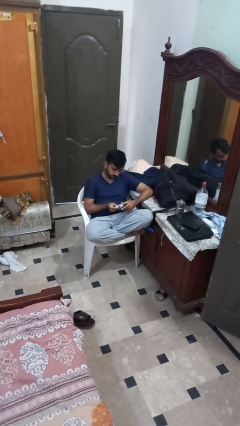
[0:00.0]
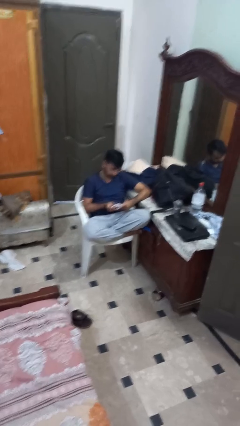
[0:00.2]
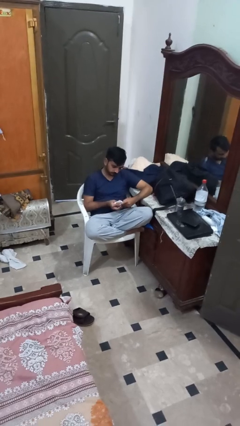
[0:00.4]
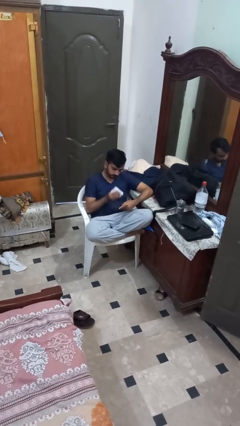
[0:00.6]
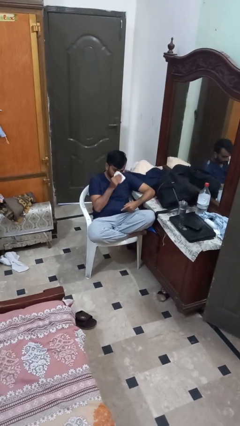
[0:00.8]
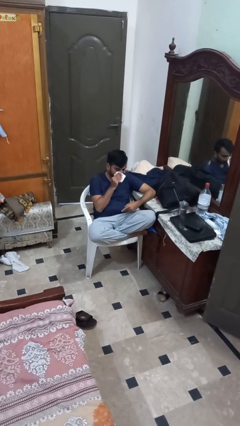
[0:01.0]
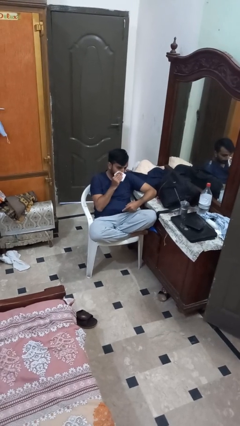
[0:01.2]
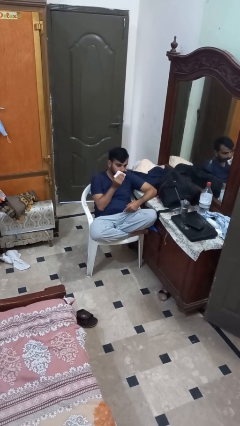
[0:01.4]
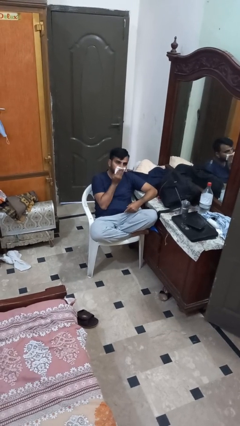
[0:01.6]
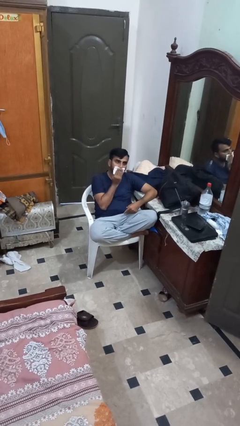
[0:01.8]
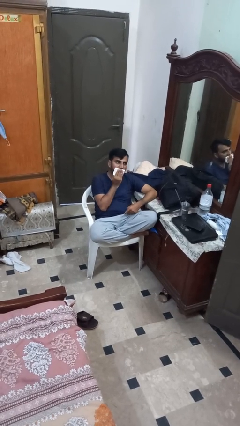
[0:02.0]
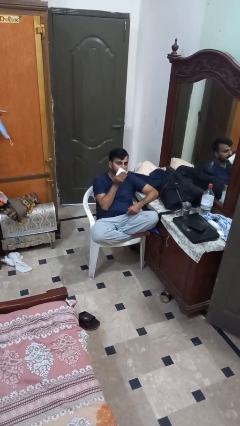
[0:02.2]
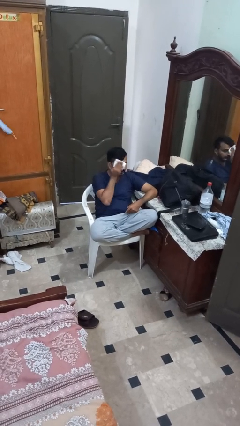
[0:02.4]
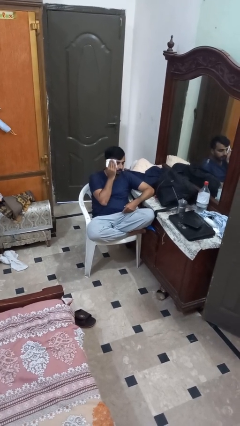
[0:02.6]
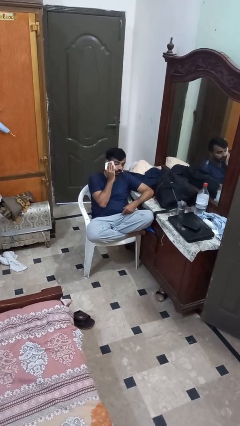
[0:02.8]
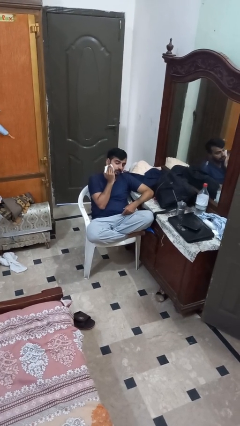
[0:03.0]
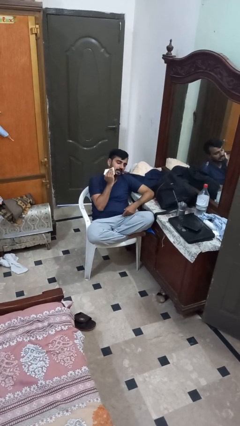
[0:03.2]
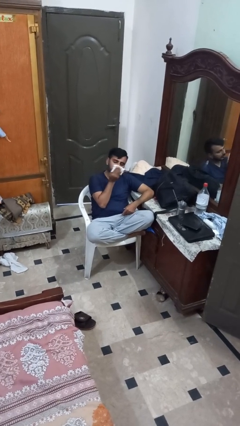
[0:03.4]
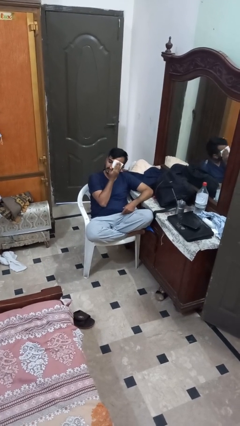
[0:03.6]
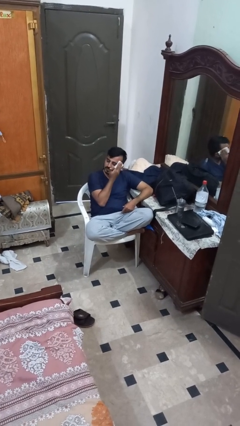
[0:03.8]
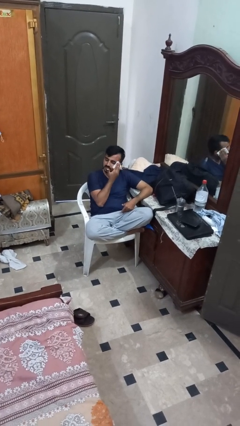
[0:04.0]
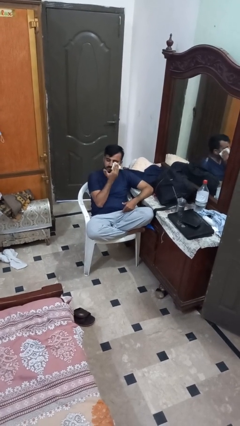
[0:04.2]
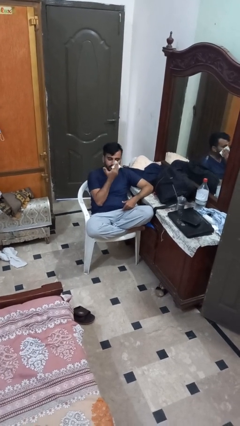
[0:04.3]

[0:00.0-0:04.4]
person wipes mouth with napkin

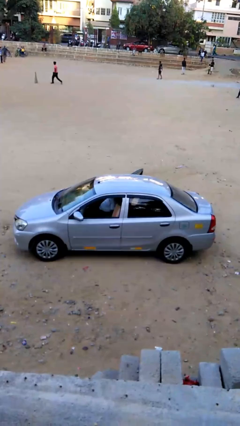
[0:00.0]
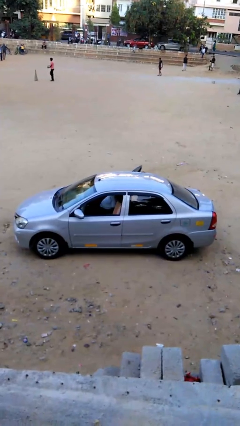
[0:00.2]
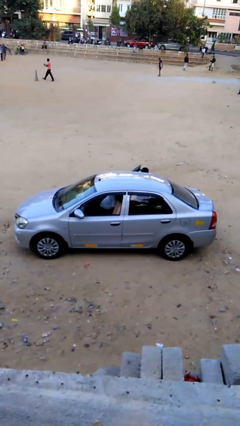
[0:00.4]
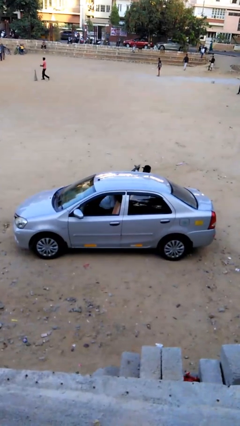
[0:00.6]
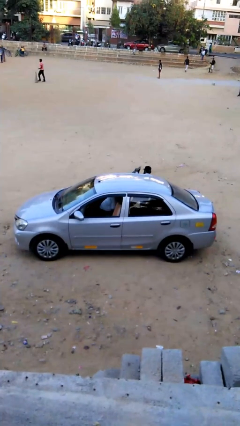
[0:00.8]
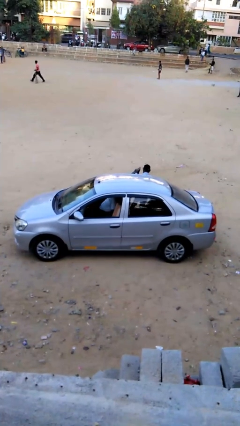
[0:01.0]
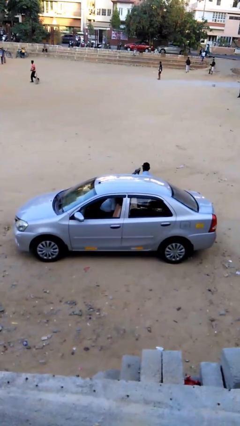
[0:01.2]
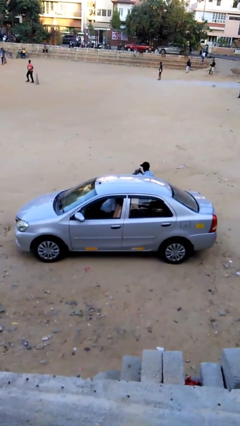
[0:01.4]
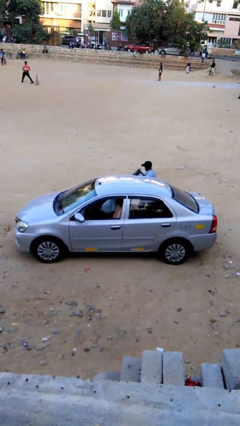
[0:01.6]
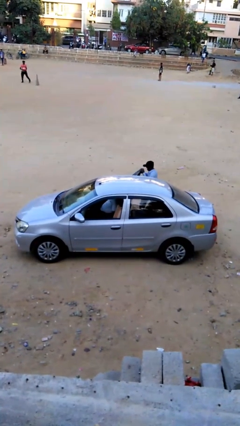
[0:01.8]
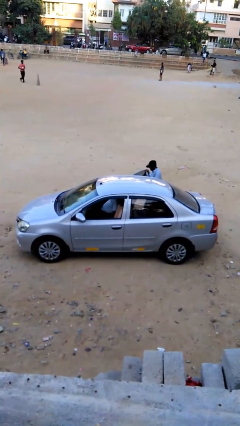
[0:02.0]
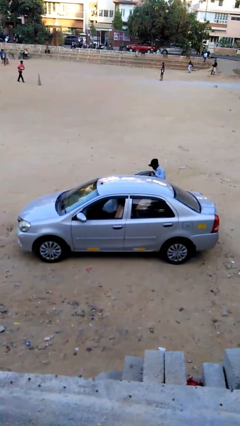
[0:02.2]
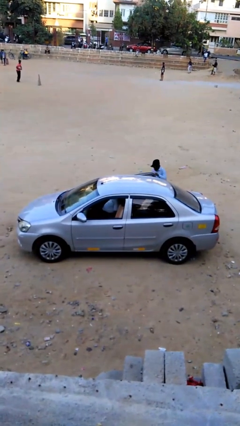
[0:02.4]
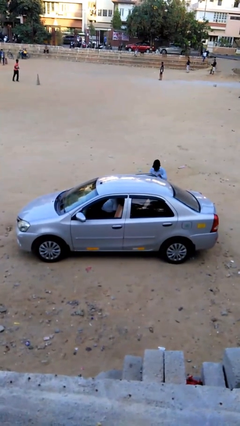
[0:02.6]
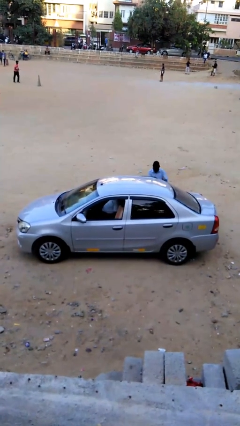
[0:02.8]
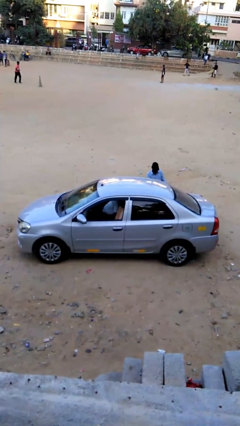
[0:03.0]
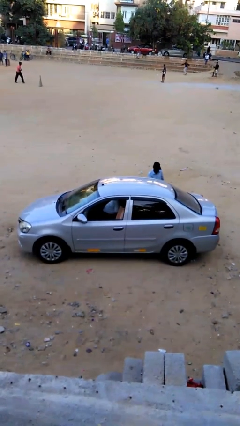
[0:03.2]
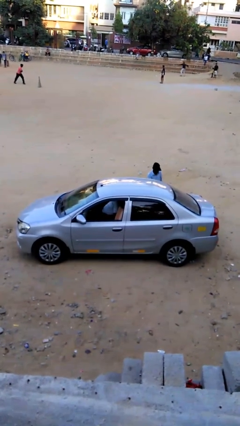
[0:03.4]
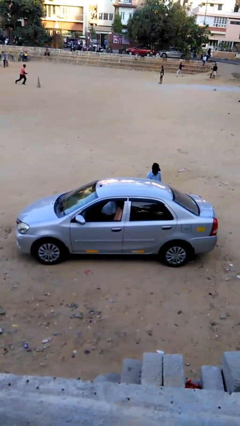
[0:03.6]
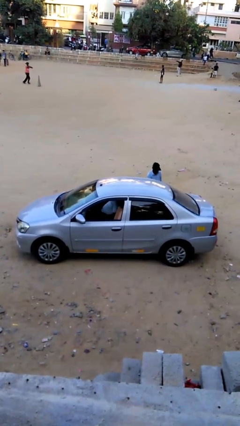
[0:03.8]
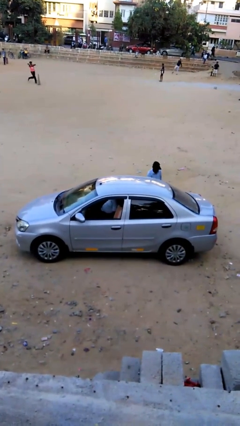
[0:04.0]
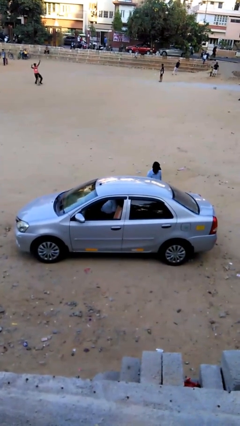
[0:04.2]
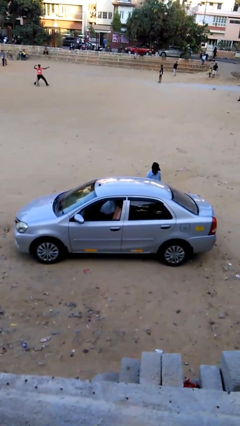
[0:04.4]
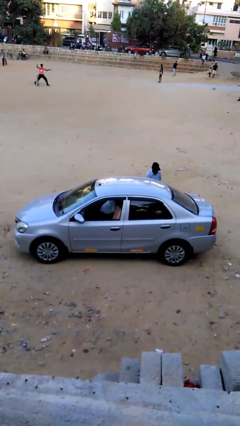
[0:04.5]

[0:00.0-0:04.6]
car drops off person

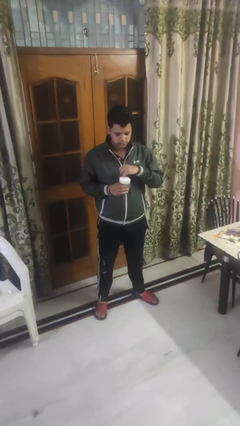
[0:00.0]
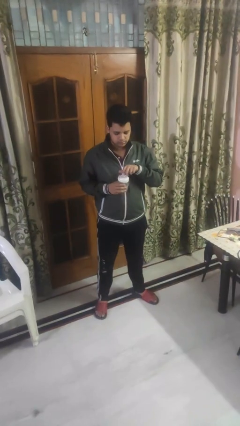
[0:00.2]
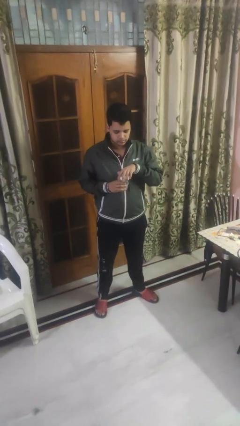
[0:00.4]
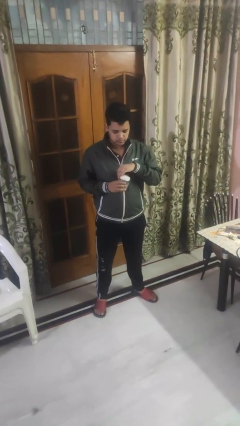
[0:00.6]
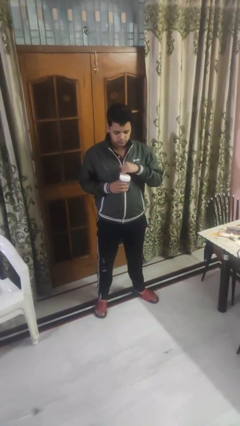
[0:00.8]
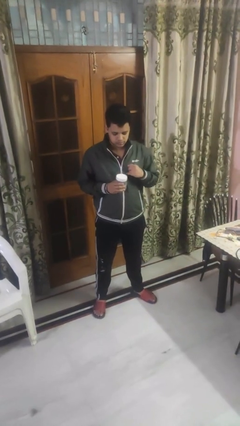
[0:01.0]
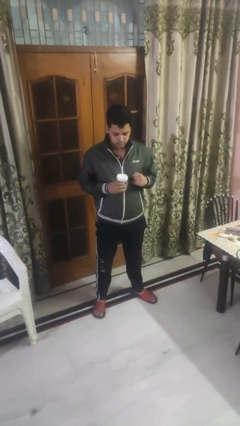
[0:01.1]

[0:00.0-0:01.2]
person closes jar

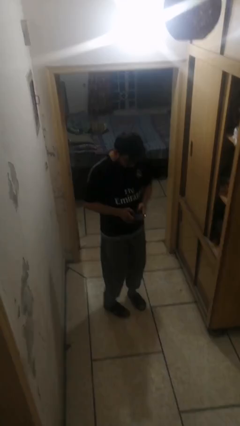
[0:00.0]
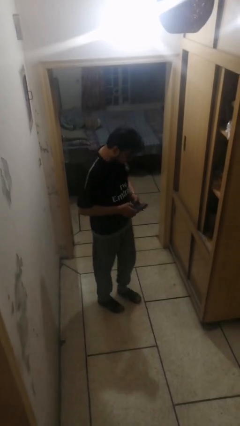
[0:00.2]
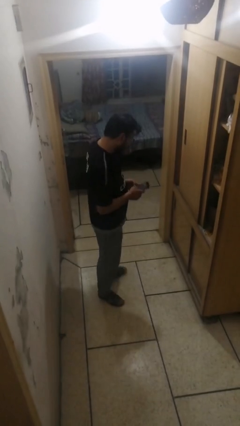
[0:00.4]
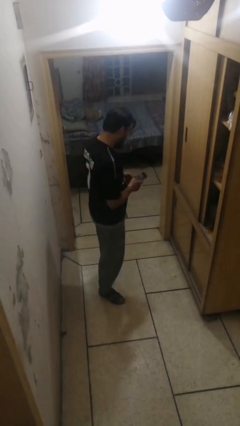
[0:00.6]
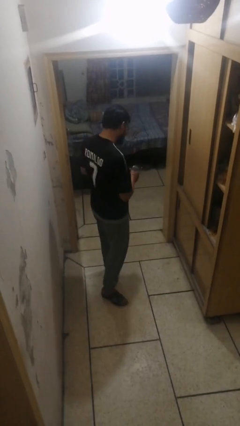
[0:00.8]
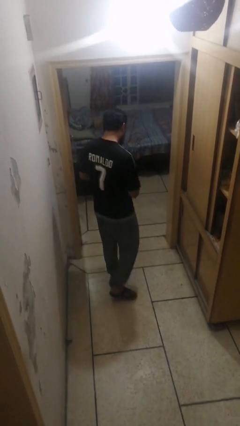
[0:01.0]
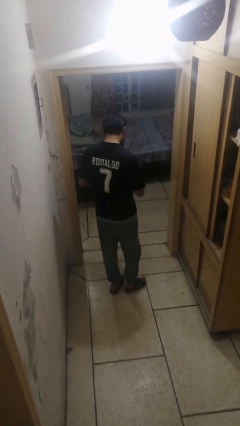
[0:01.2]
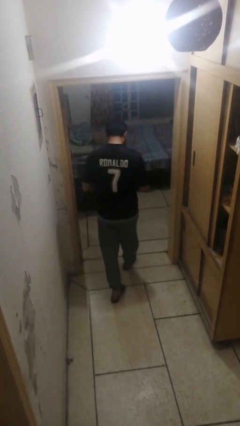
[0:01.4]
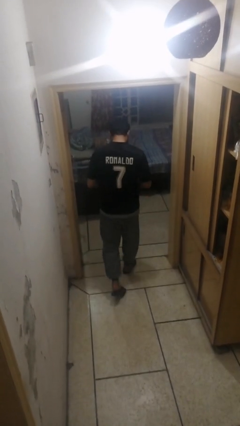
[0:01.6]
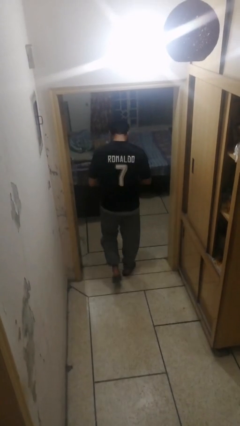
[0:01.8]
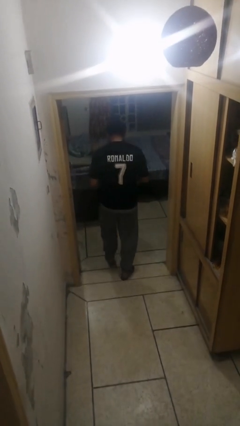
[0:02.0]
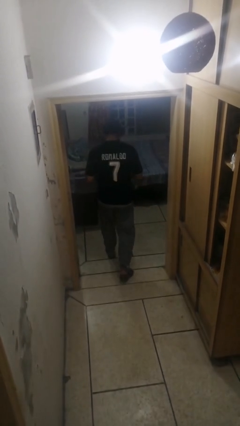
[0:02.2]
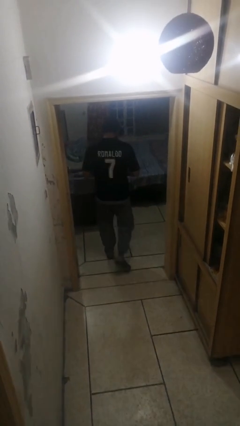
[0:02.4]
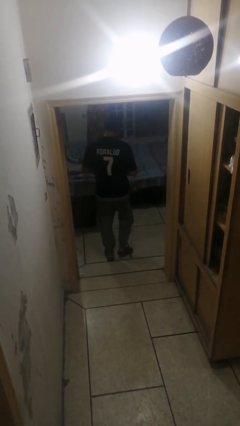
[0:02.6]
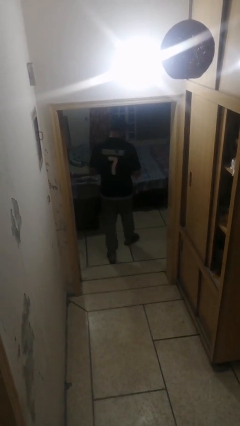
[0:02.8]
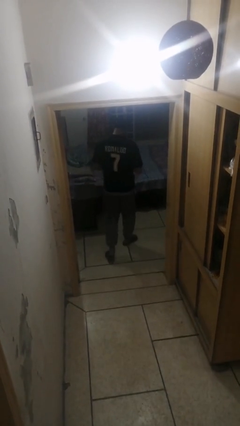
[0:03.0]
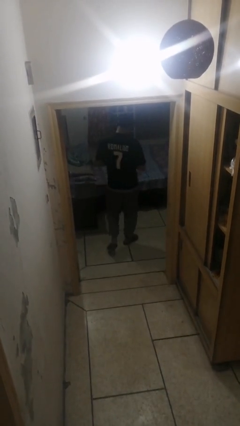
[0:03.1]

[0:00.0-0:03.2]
person exits scene through structure

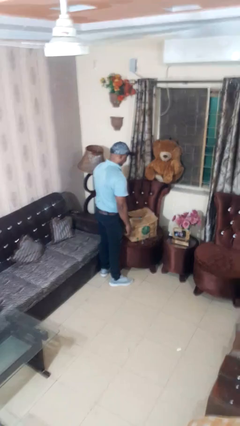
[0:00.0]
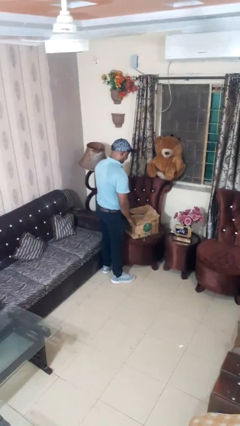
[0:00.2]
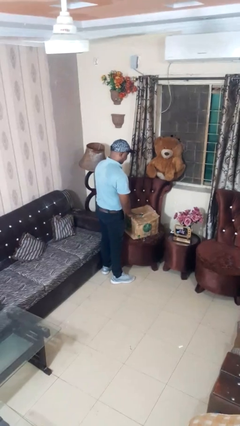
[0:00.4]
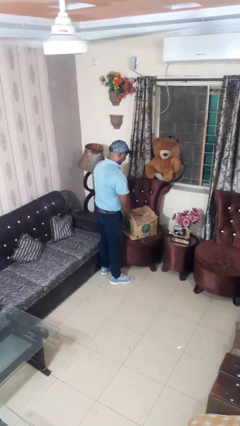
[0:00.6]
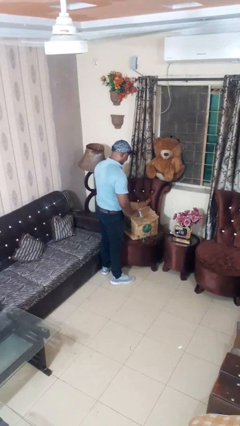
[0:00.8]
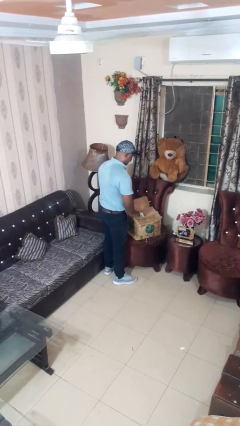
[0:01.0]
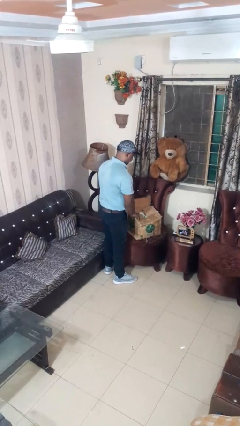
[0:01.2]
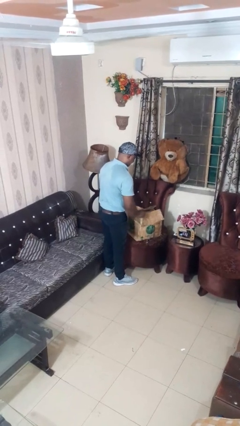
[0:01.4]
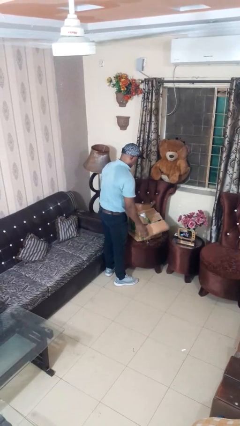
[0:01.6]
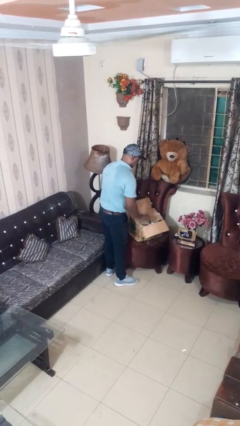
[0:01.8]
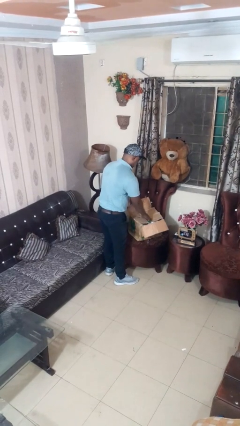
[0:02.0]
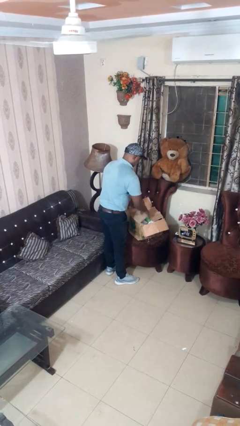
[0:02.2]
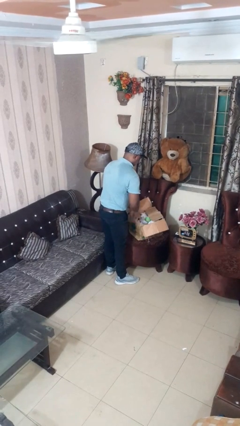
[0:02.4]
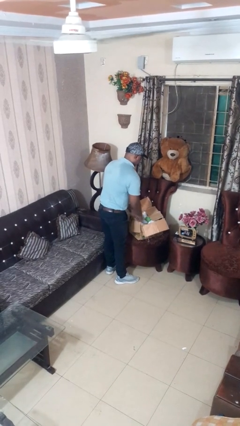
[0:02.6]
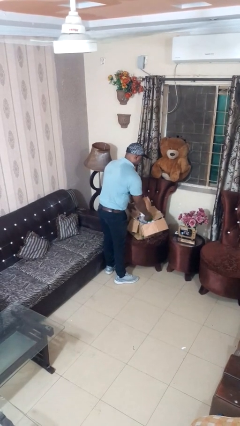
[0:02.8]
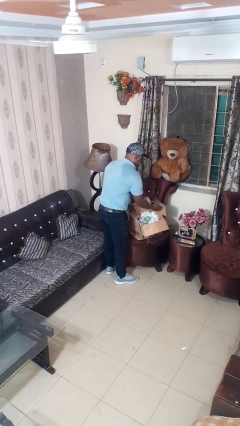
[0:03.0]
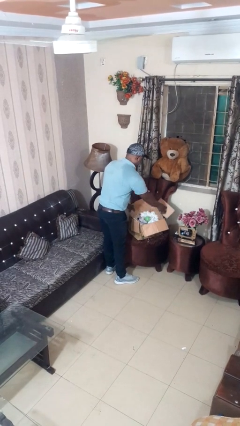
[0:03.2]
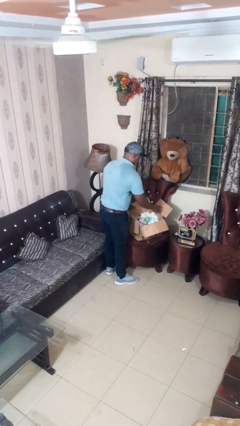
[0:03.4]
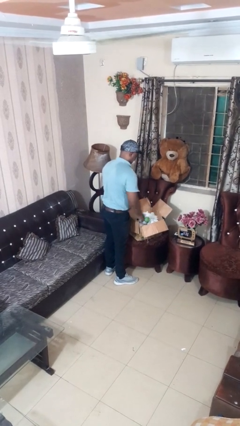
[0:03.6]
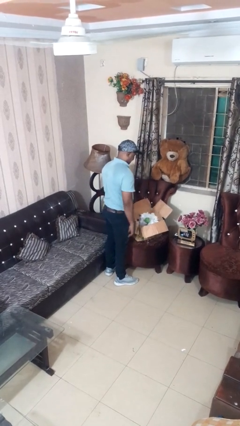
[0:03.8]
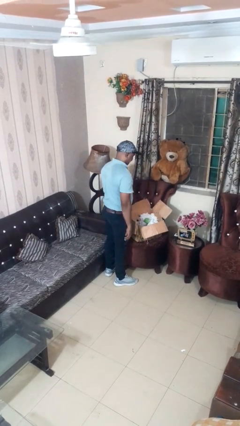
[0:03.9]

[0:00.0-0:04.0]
person opens box

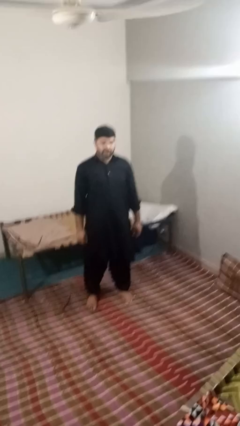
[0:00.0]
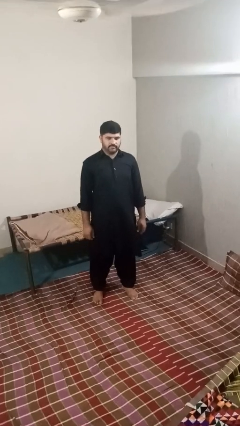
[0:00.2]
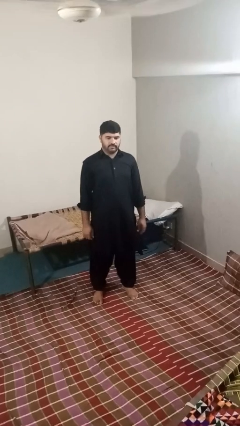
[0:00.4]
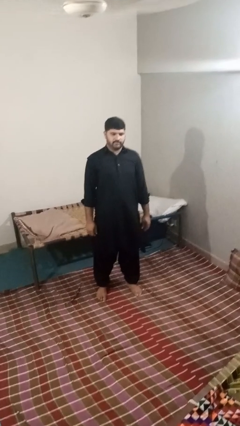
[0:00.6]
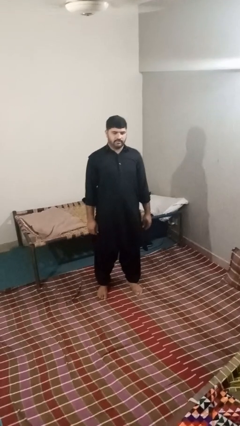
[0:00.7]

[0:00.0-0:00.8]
person stands up
